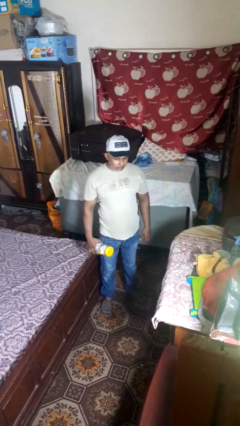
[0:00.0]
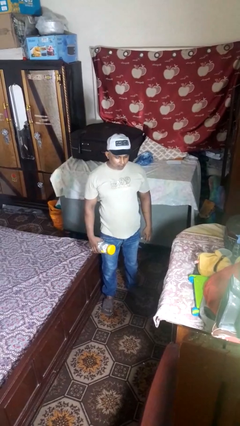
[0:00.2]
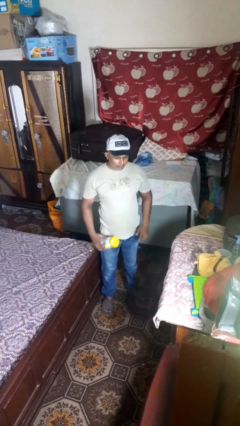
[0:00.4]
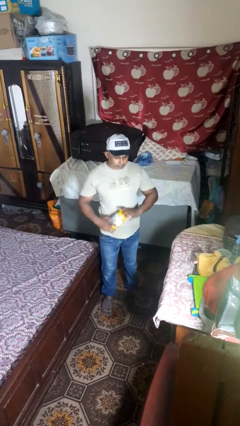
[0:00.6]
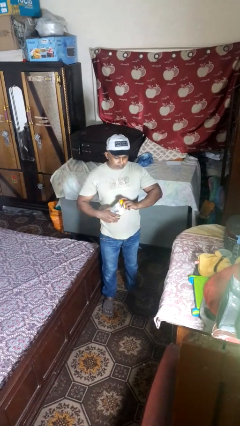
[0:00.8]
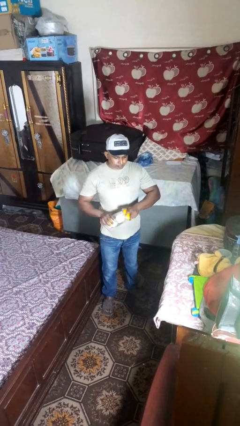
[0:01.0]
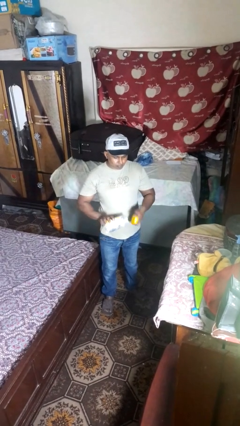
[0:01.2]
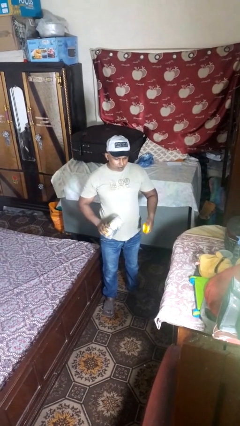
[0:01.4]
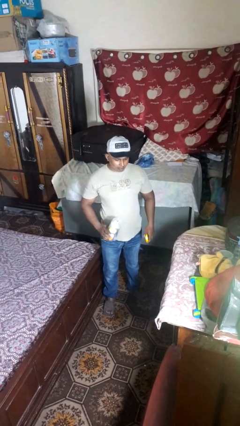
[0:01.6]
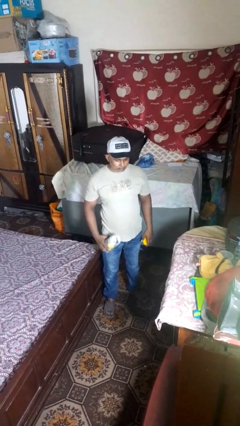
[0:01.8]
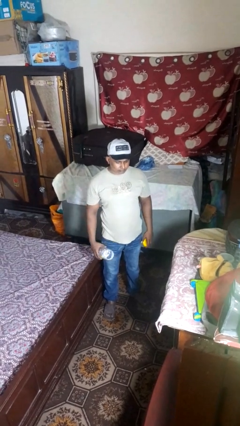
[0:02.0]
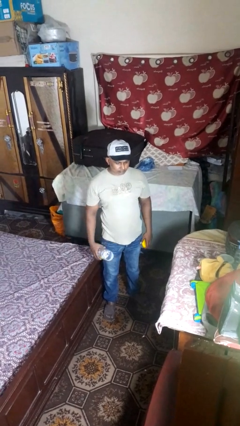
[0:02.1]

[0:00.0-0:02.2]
person opens jar

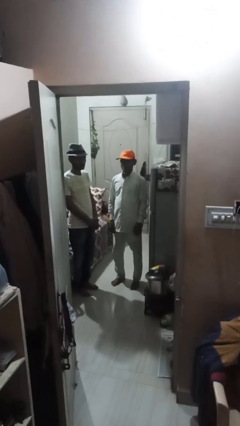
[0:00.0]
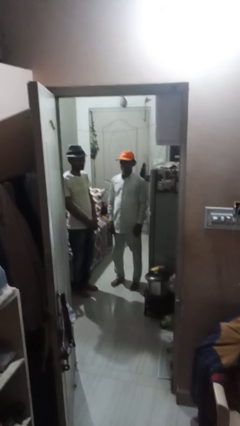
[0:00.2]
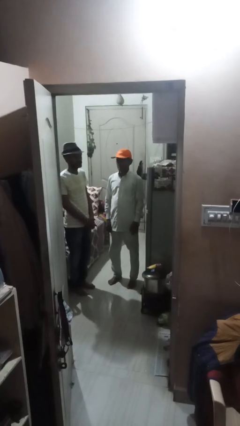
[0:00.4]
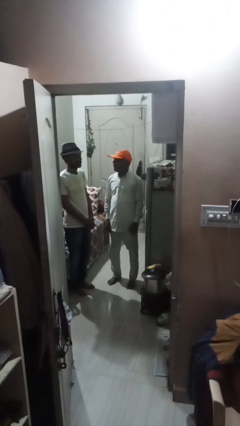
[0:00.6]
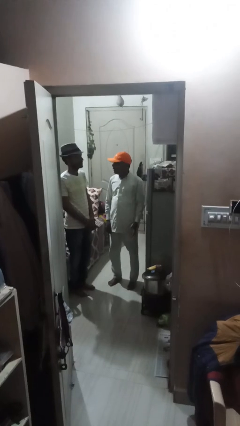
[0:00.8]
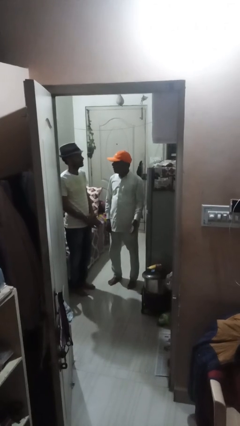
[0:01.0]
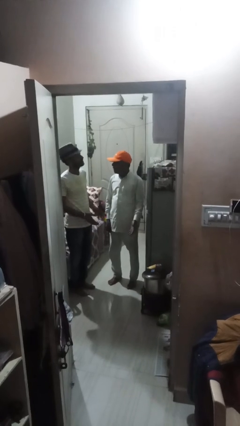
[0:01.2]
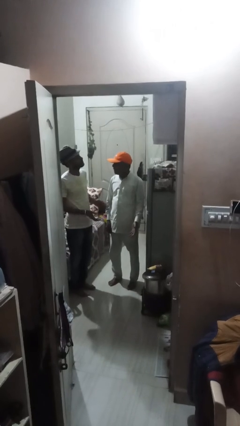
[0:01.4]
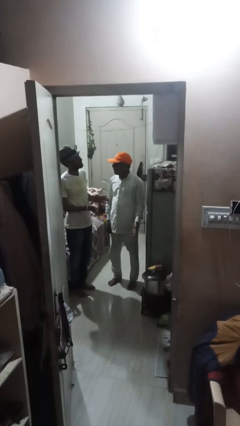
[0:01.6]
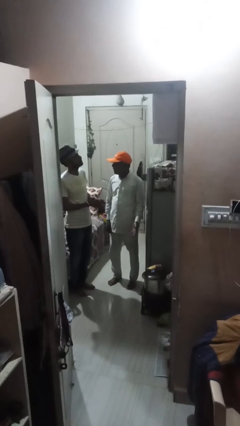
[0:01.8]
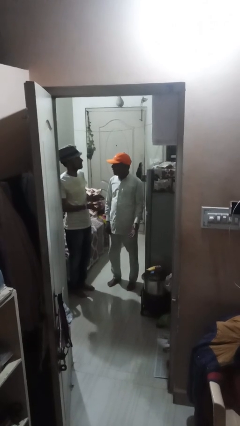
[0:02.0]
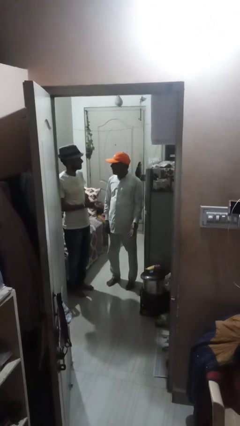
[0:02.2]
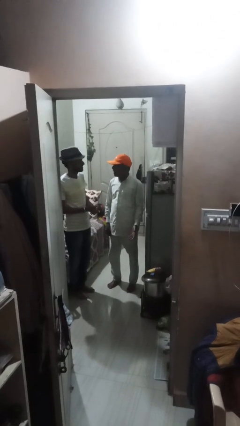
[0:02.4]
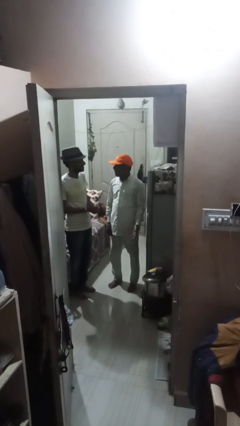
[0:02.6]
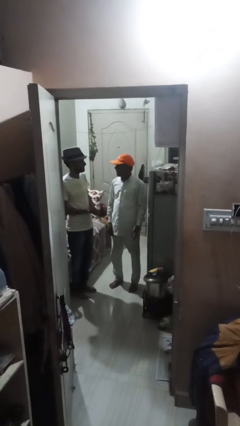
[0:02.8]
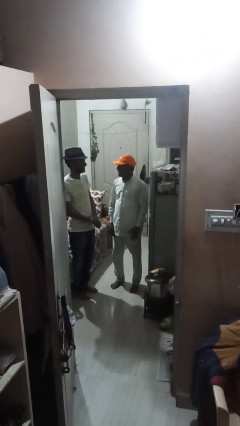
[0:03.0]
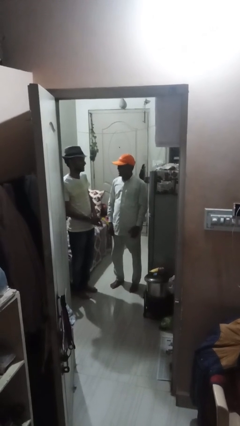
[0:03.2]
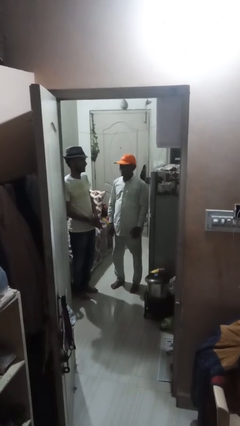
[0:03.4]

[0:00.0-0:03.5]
person laughs with person

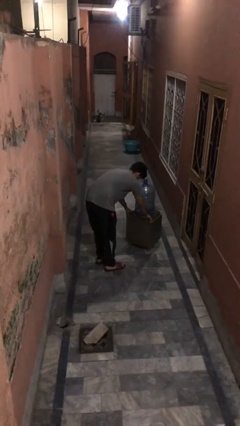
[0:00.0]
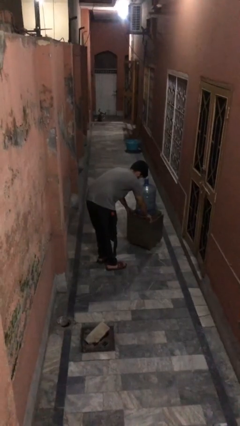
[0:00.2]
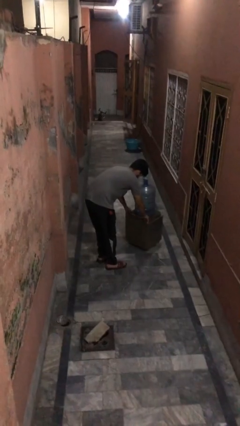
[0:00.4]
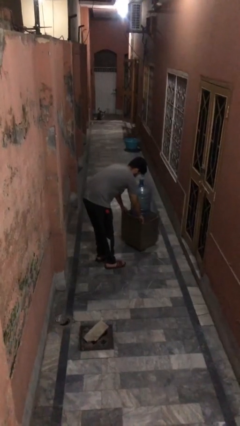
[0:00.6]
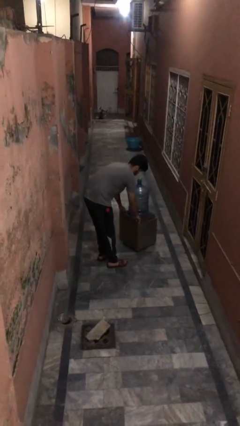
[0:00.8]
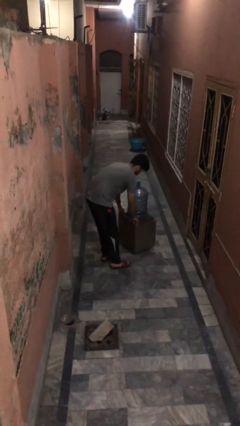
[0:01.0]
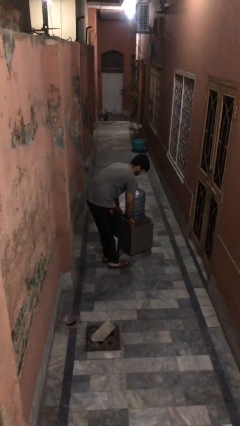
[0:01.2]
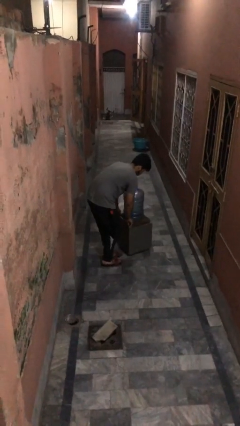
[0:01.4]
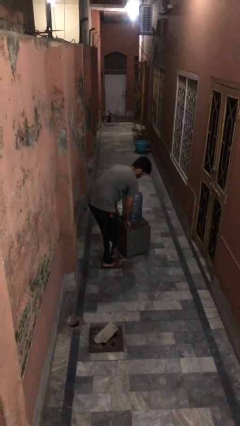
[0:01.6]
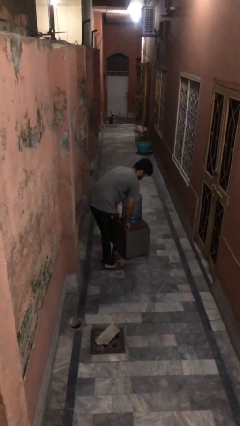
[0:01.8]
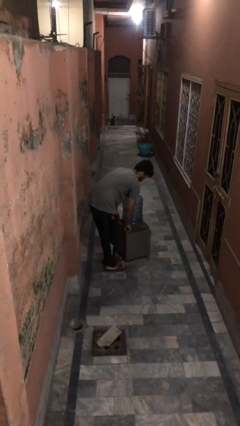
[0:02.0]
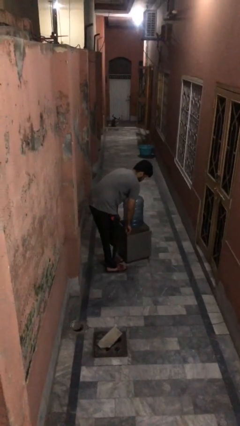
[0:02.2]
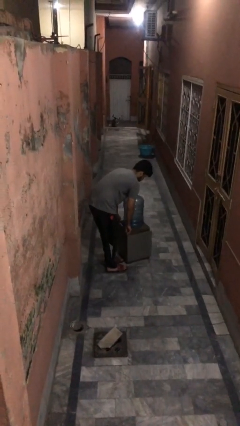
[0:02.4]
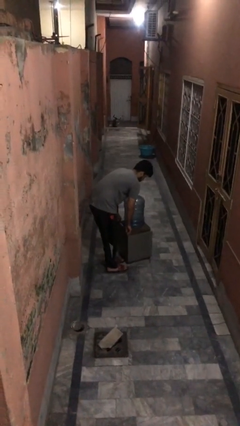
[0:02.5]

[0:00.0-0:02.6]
person pulls wheeled cart

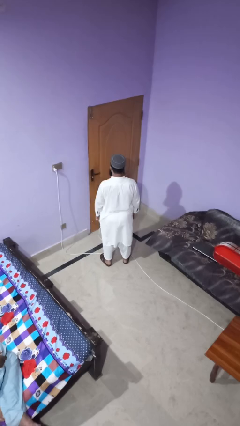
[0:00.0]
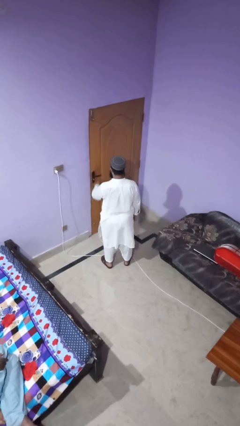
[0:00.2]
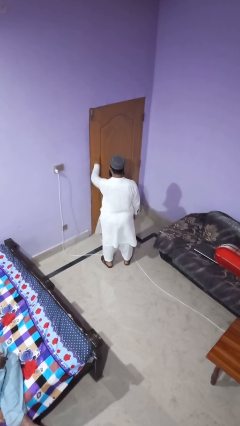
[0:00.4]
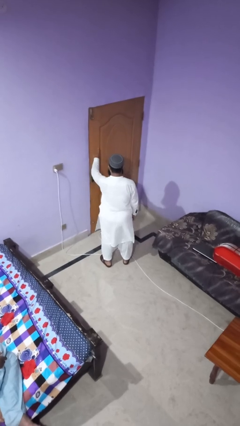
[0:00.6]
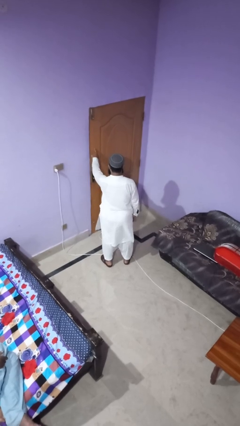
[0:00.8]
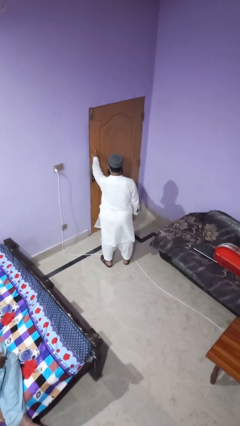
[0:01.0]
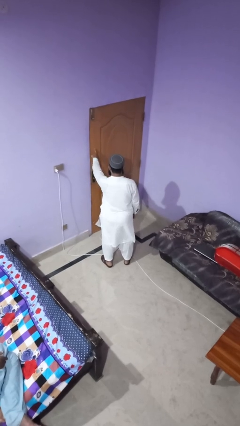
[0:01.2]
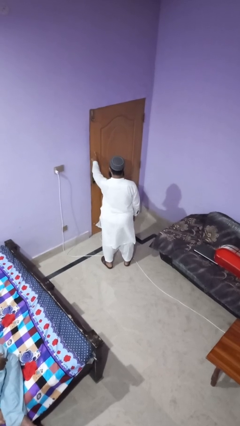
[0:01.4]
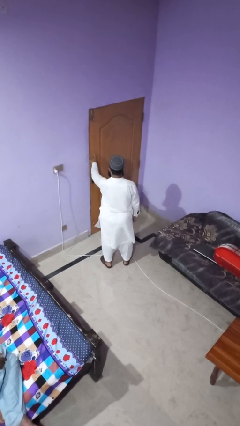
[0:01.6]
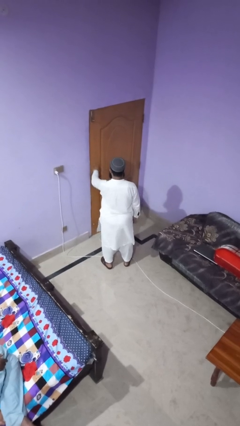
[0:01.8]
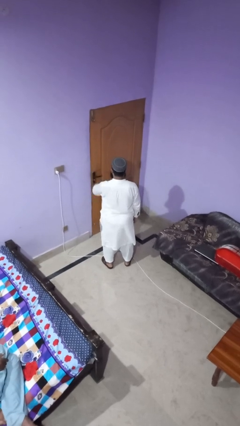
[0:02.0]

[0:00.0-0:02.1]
person taps object with finger

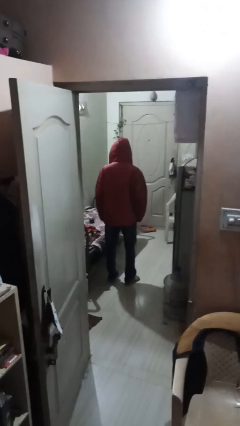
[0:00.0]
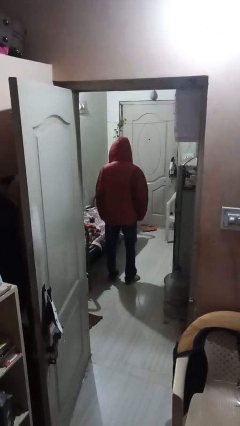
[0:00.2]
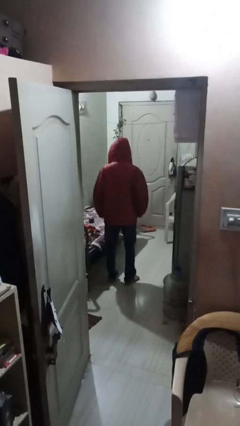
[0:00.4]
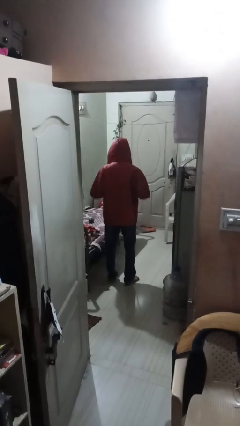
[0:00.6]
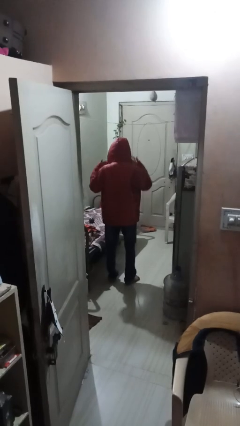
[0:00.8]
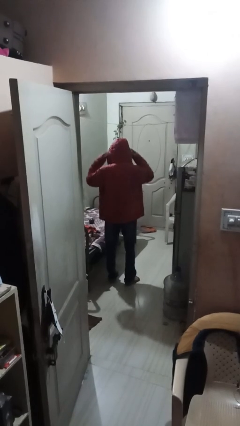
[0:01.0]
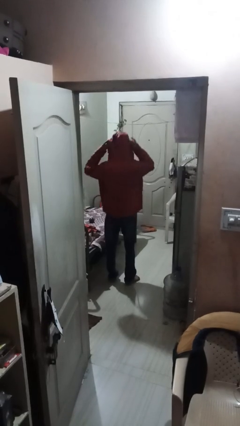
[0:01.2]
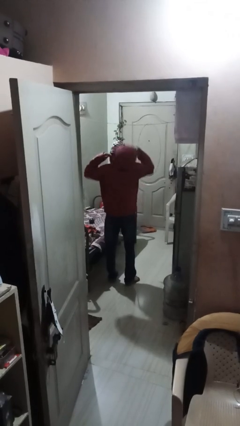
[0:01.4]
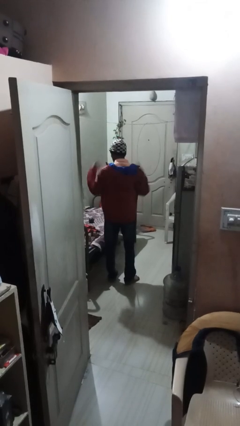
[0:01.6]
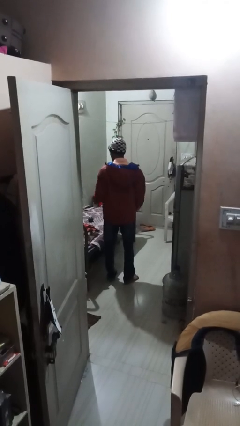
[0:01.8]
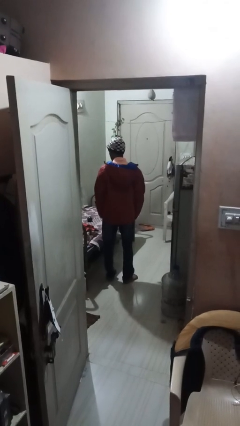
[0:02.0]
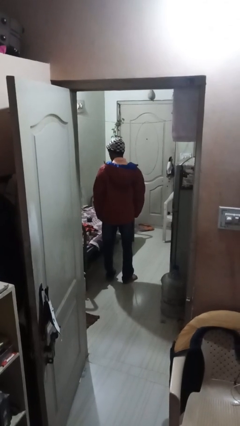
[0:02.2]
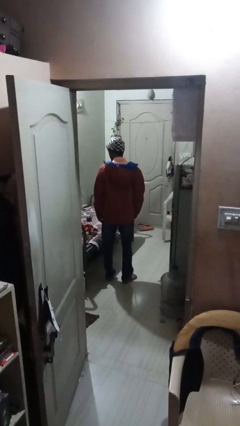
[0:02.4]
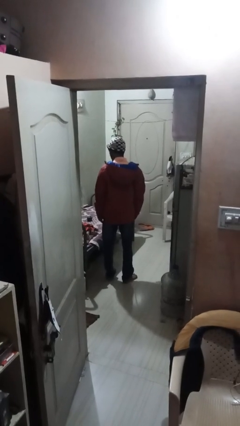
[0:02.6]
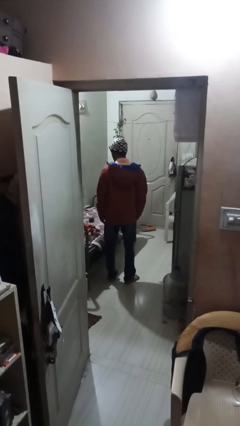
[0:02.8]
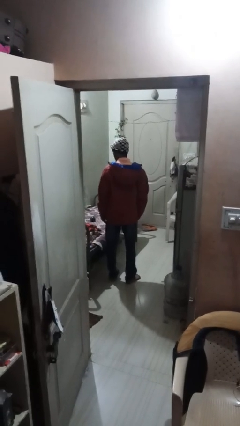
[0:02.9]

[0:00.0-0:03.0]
person takes off hoodie

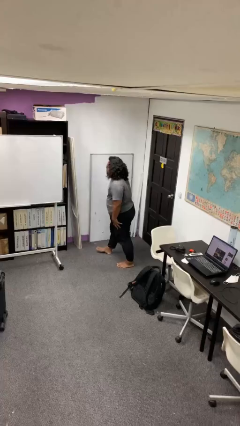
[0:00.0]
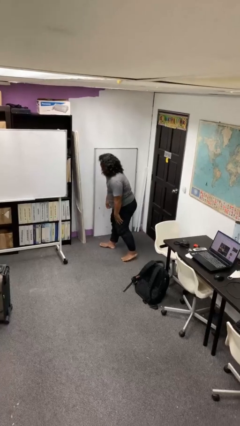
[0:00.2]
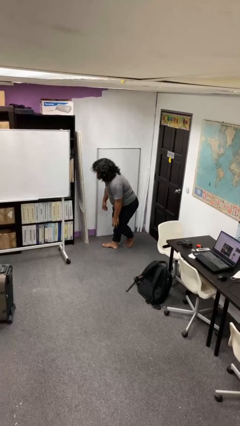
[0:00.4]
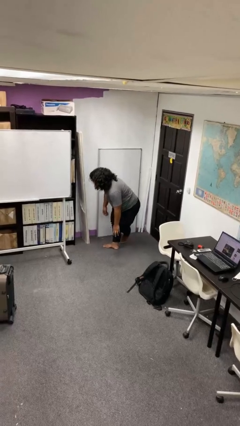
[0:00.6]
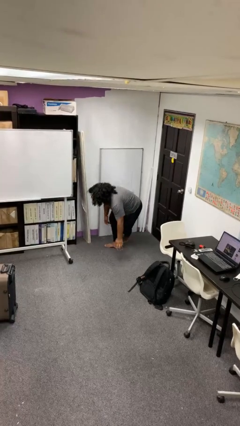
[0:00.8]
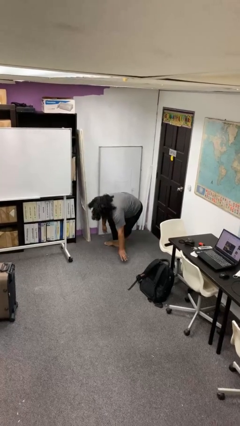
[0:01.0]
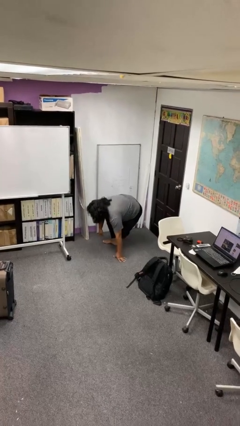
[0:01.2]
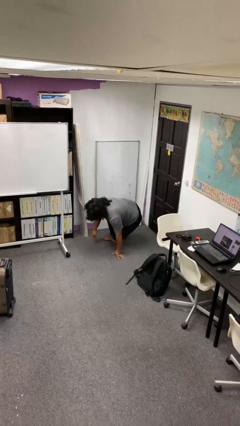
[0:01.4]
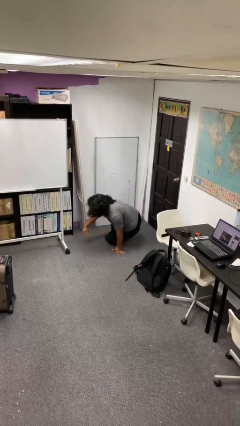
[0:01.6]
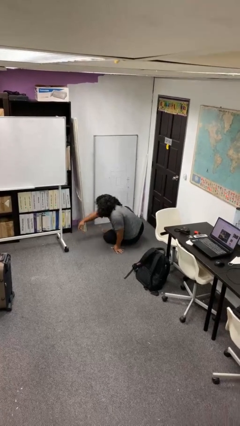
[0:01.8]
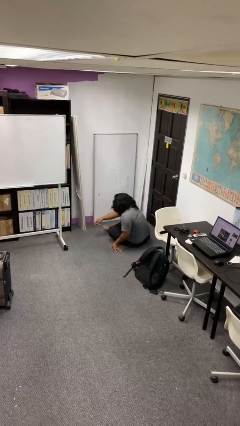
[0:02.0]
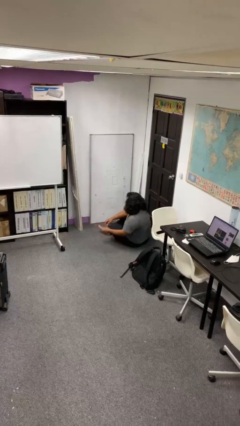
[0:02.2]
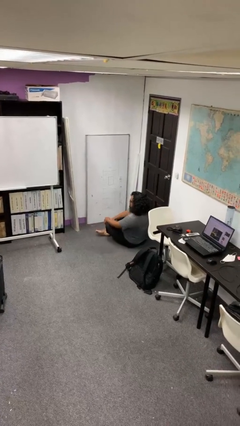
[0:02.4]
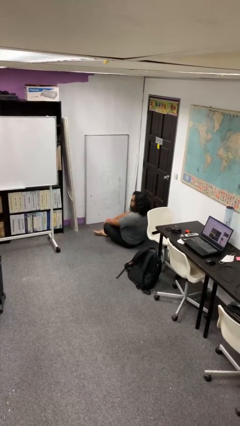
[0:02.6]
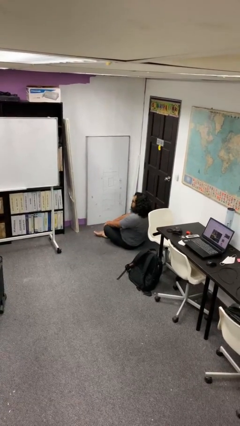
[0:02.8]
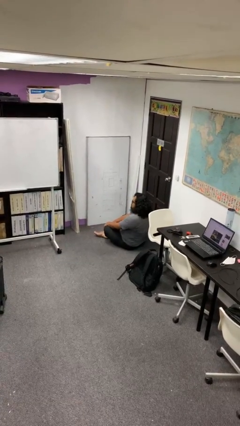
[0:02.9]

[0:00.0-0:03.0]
person sits crisscross

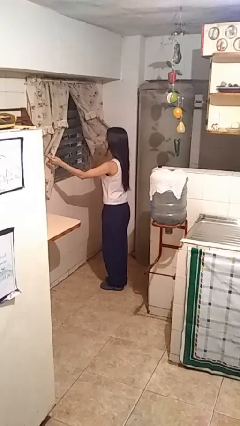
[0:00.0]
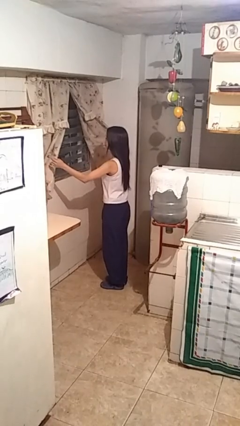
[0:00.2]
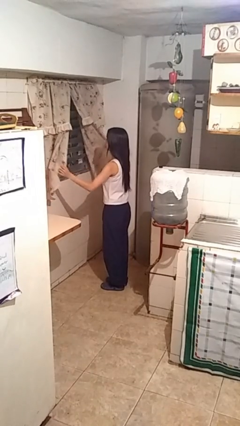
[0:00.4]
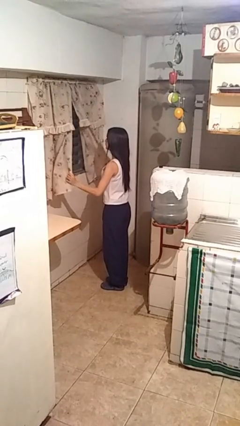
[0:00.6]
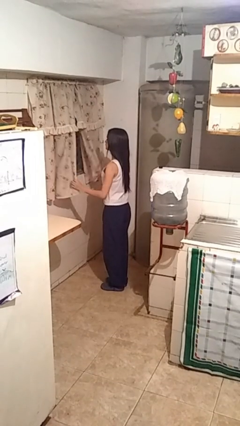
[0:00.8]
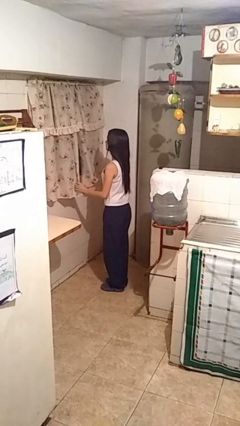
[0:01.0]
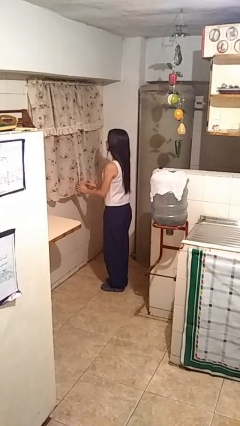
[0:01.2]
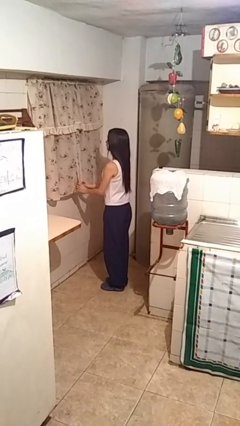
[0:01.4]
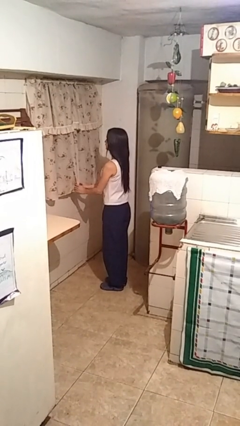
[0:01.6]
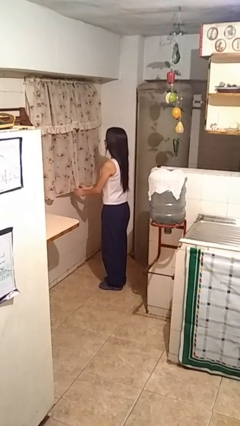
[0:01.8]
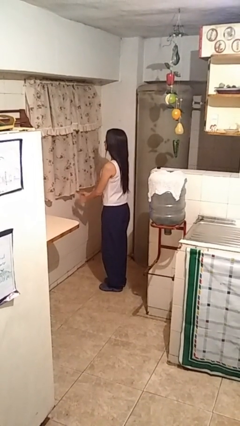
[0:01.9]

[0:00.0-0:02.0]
person closes curtains
